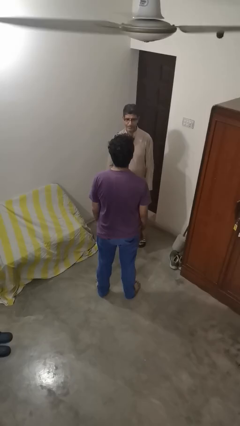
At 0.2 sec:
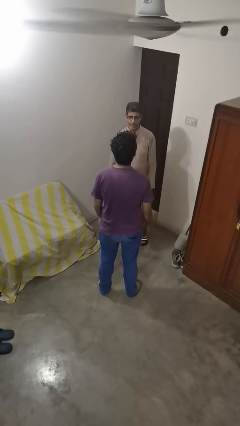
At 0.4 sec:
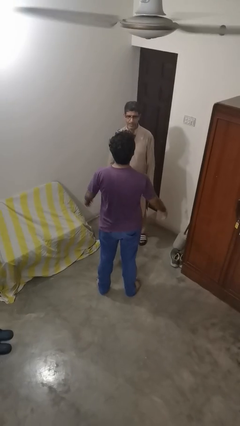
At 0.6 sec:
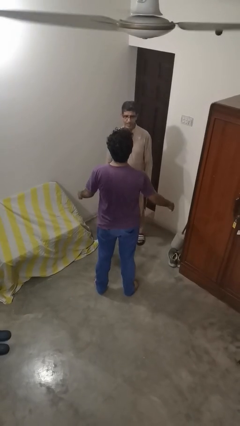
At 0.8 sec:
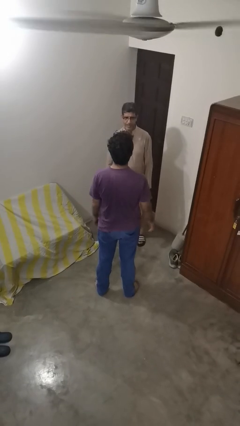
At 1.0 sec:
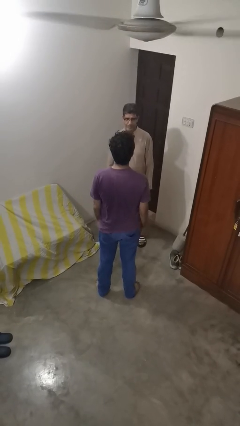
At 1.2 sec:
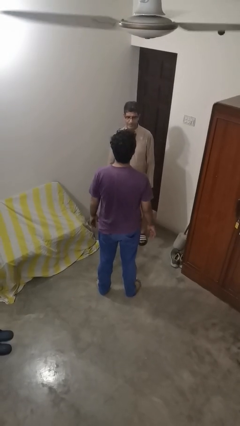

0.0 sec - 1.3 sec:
person laughs with person

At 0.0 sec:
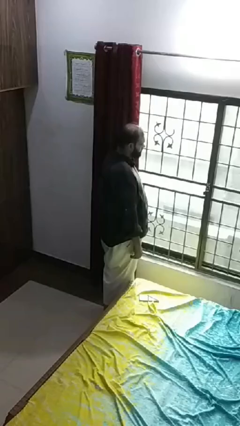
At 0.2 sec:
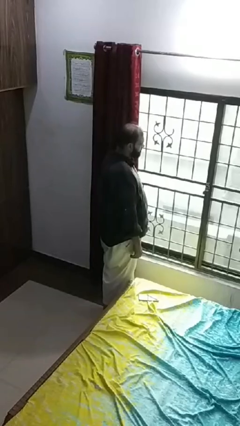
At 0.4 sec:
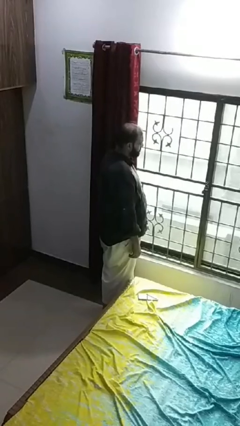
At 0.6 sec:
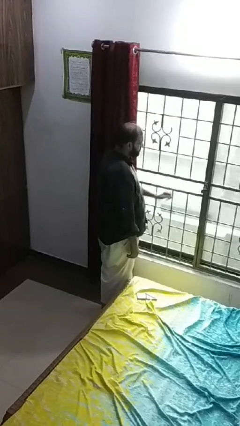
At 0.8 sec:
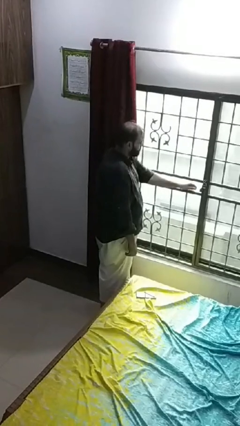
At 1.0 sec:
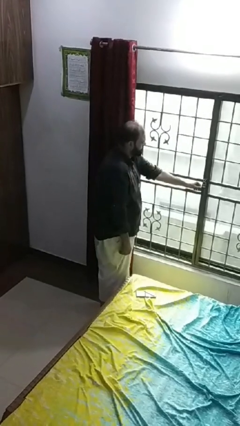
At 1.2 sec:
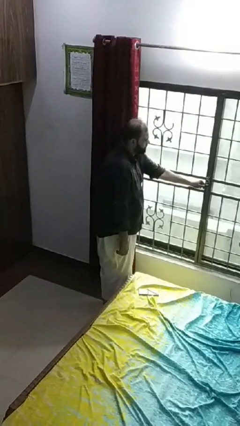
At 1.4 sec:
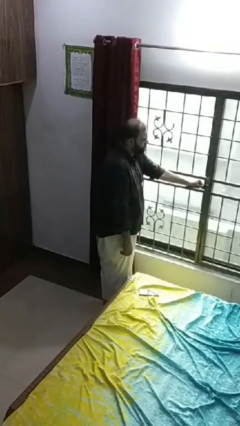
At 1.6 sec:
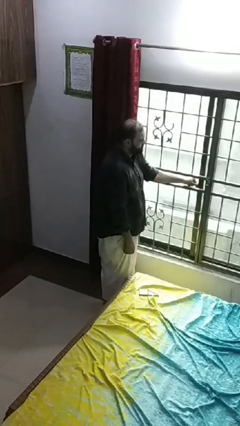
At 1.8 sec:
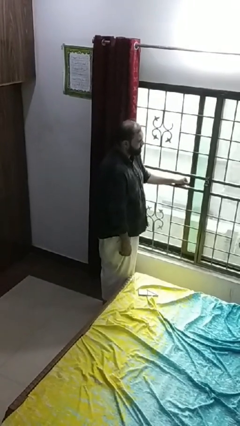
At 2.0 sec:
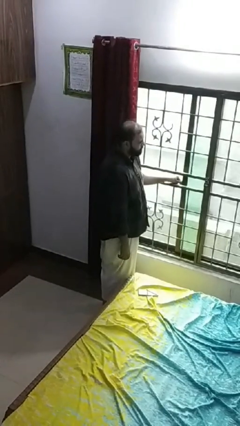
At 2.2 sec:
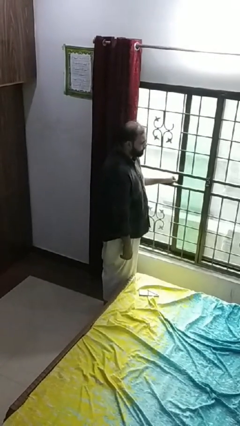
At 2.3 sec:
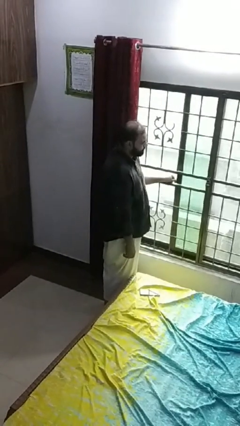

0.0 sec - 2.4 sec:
person opens home window

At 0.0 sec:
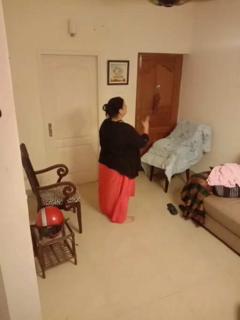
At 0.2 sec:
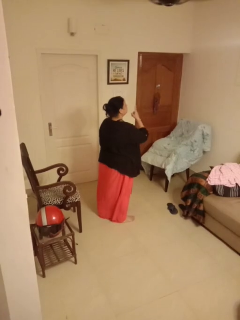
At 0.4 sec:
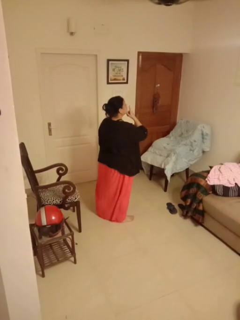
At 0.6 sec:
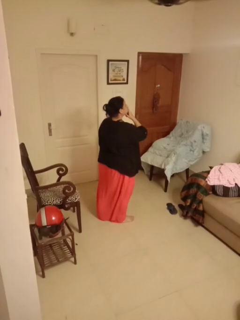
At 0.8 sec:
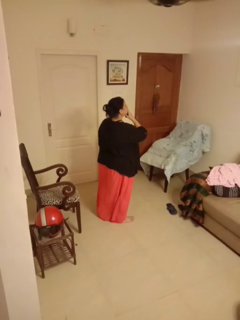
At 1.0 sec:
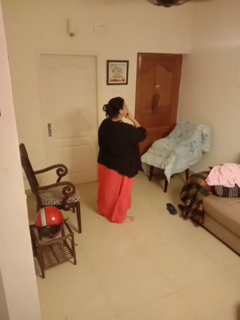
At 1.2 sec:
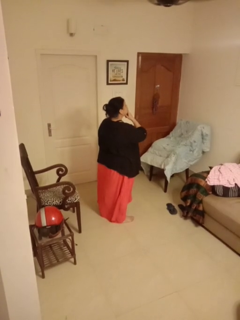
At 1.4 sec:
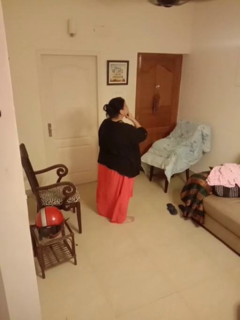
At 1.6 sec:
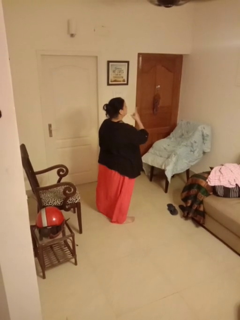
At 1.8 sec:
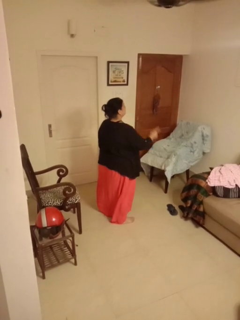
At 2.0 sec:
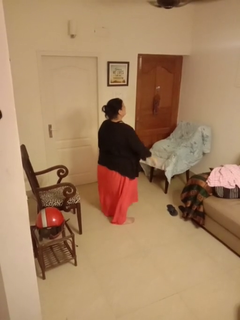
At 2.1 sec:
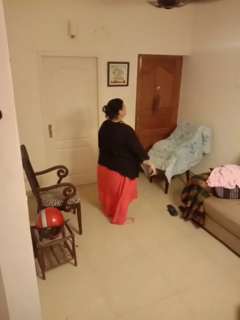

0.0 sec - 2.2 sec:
person gestures be quiet

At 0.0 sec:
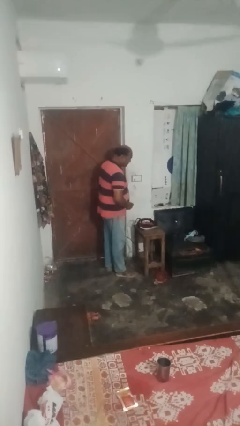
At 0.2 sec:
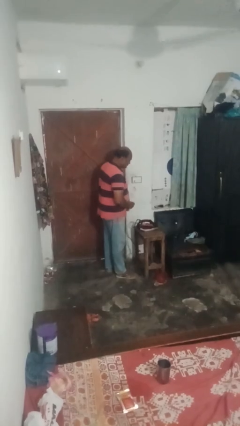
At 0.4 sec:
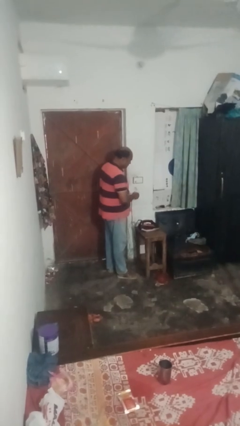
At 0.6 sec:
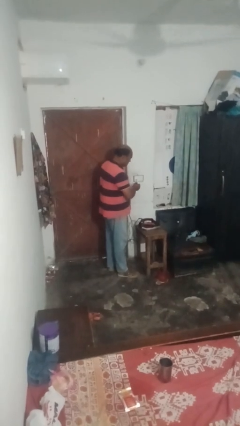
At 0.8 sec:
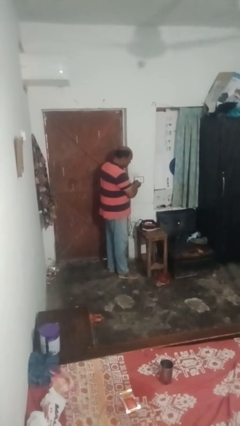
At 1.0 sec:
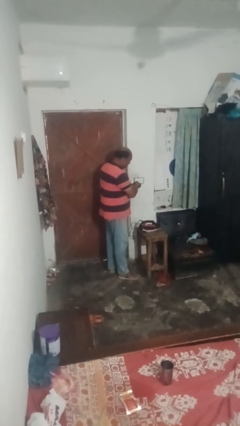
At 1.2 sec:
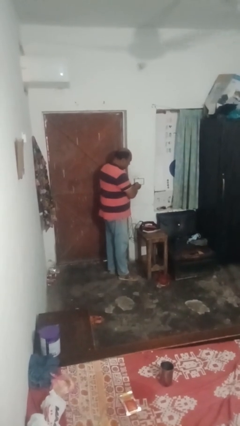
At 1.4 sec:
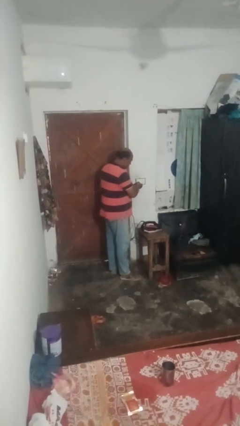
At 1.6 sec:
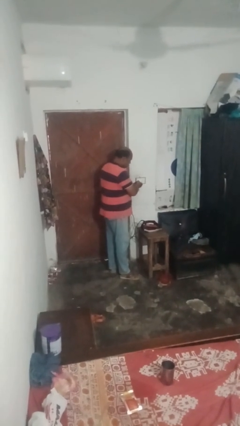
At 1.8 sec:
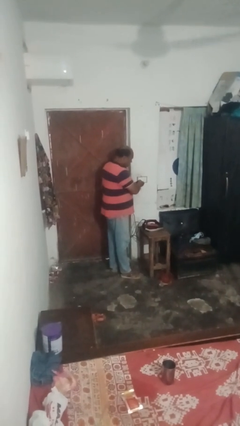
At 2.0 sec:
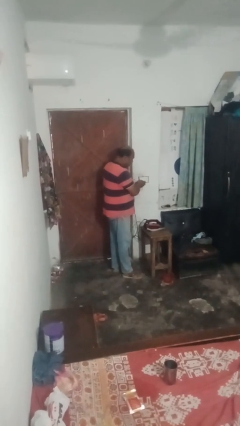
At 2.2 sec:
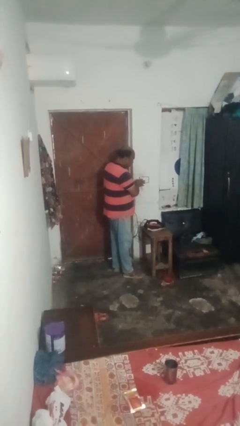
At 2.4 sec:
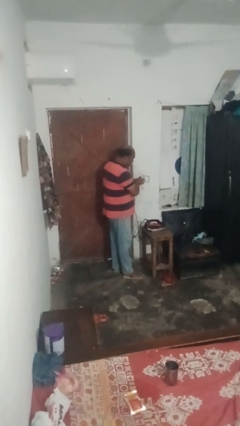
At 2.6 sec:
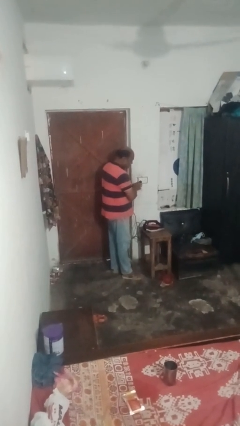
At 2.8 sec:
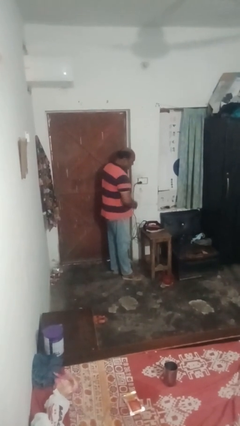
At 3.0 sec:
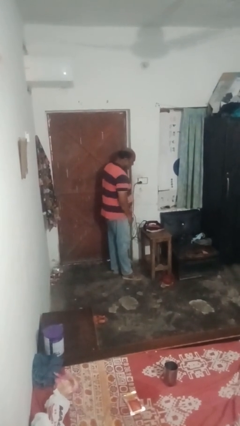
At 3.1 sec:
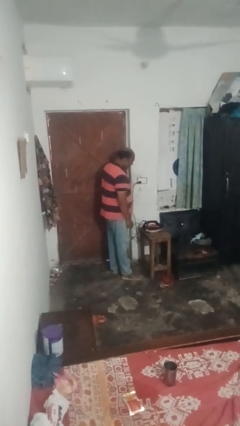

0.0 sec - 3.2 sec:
person plugs into electrical socket

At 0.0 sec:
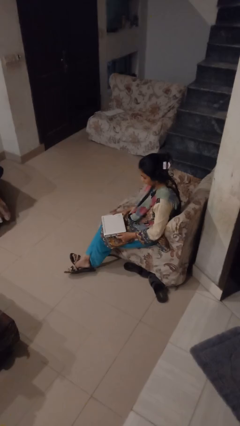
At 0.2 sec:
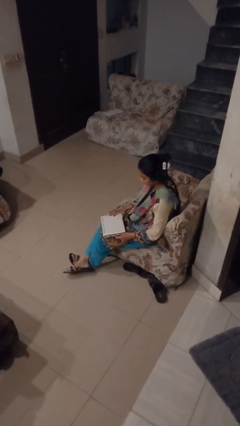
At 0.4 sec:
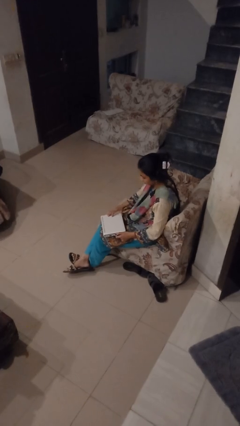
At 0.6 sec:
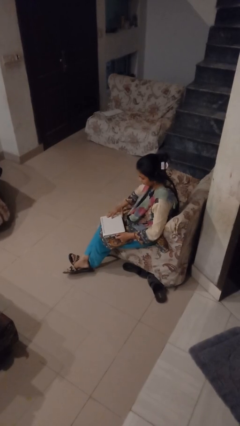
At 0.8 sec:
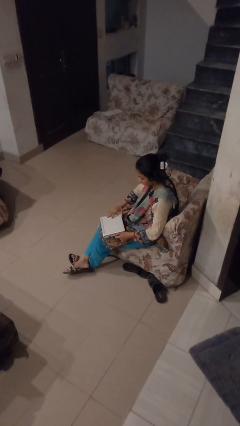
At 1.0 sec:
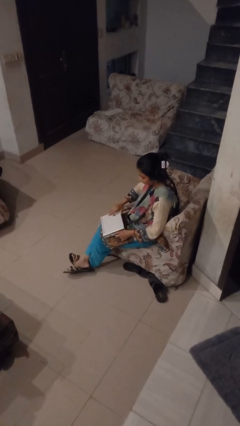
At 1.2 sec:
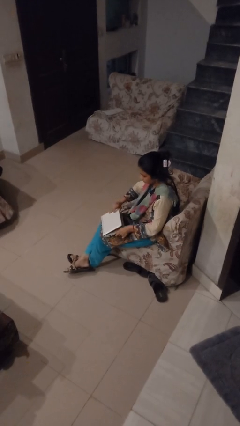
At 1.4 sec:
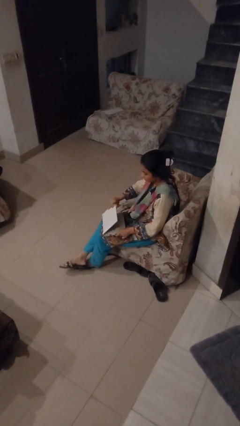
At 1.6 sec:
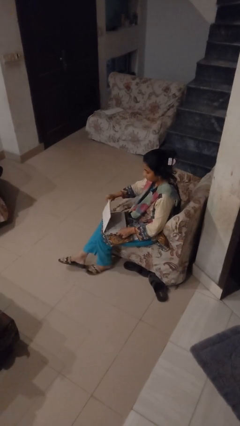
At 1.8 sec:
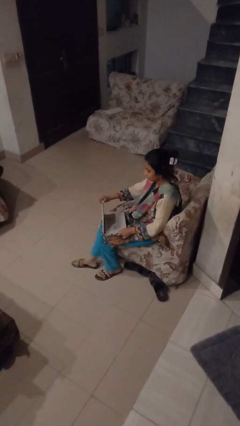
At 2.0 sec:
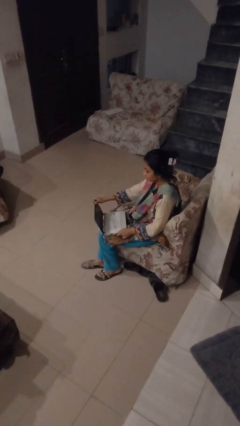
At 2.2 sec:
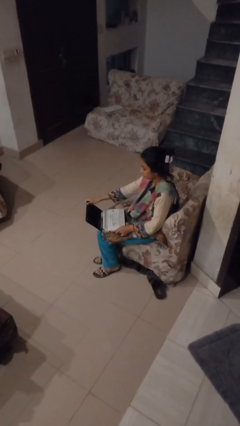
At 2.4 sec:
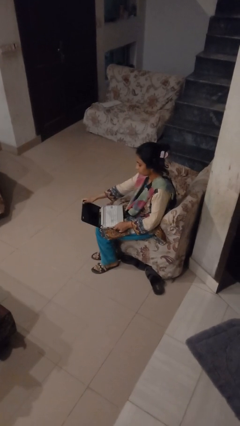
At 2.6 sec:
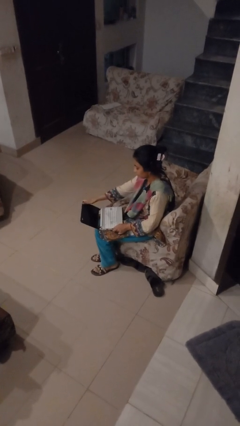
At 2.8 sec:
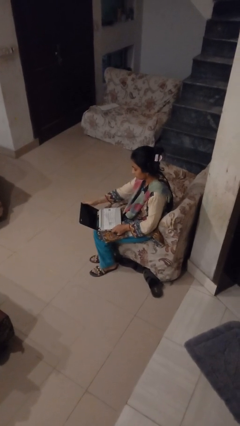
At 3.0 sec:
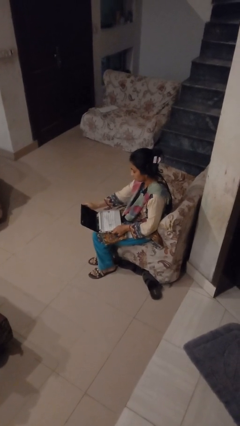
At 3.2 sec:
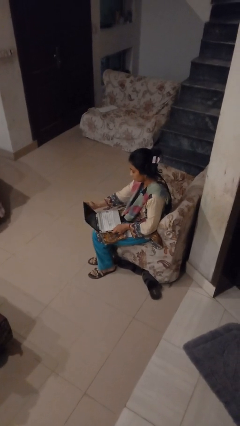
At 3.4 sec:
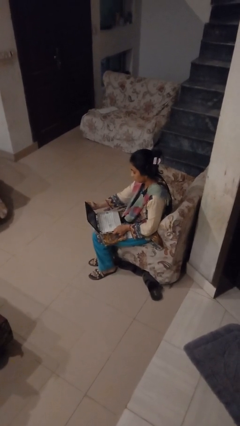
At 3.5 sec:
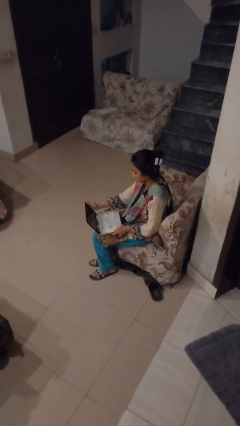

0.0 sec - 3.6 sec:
person opens laptop

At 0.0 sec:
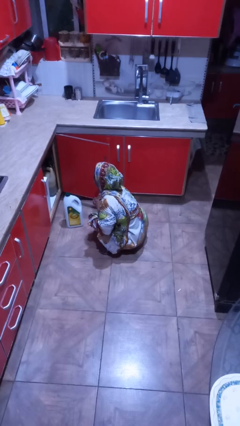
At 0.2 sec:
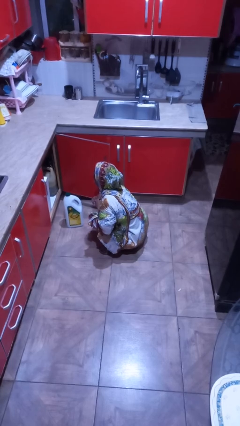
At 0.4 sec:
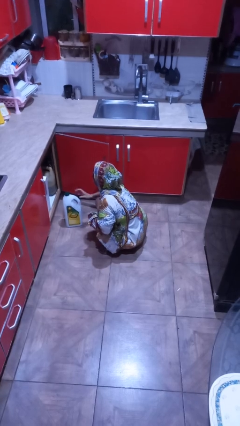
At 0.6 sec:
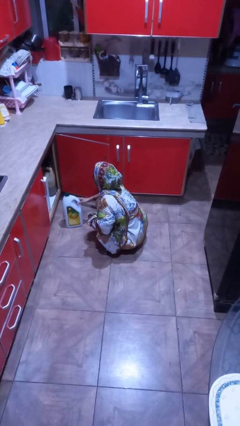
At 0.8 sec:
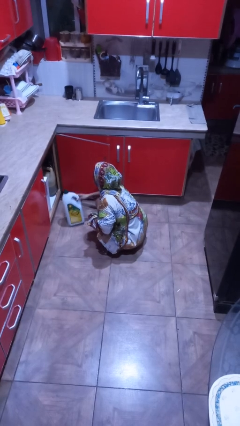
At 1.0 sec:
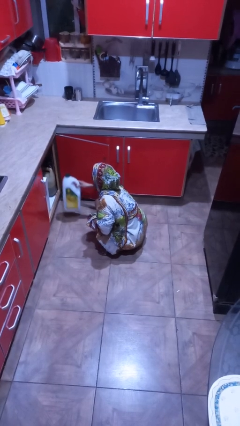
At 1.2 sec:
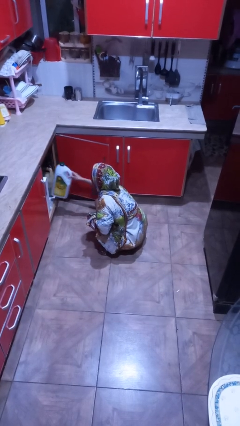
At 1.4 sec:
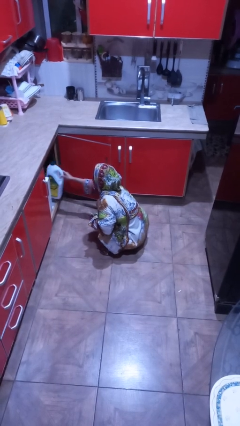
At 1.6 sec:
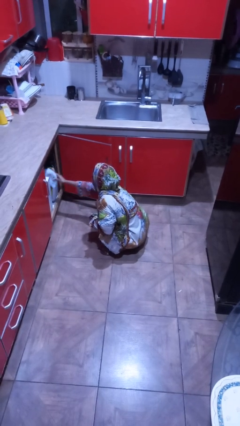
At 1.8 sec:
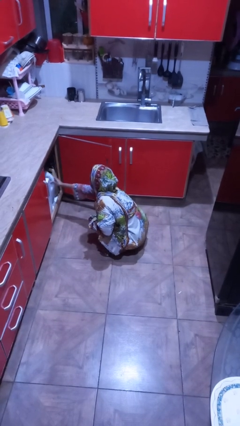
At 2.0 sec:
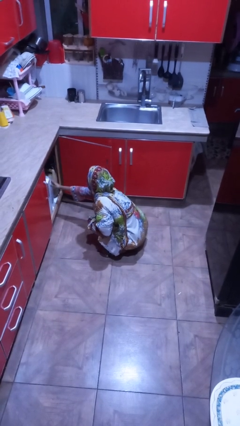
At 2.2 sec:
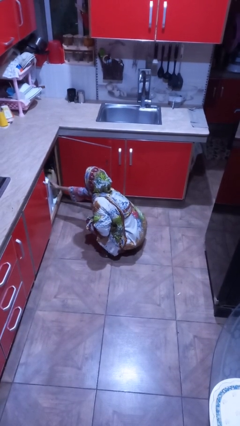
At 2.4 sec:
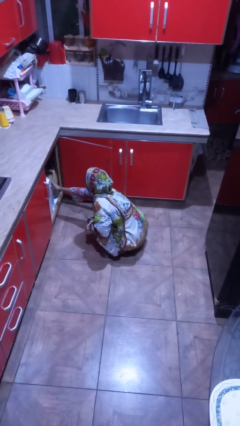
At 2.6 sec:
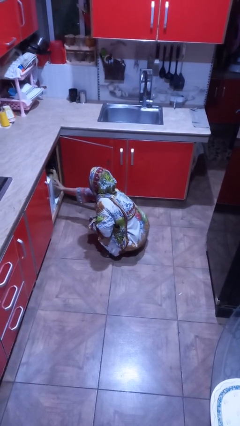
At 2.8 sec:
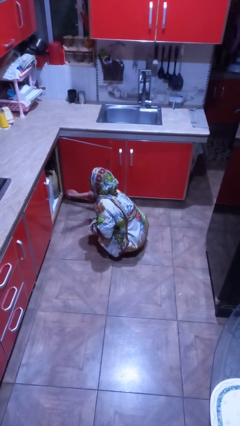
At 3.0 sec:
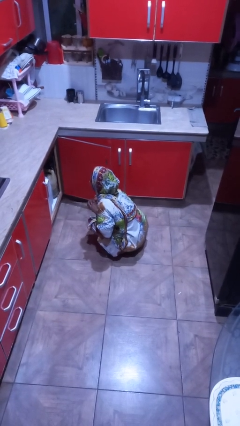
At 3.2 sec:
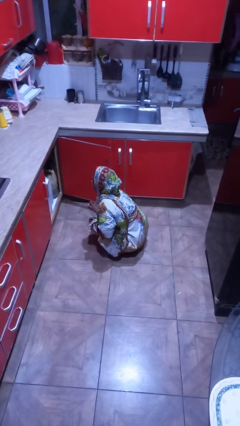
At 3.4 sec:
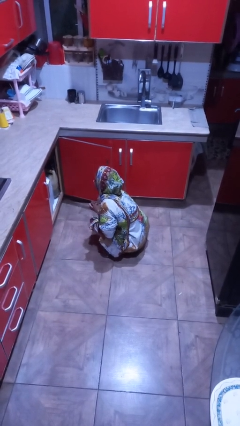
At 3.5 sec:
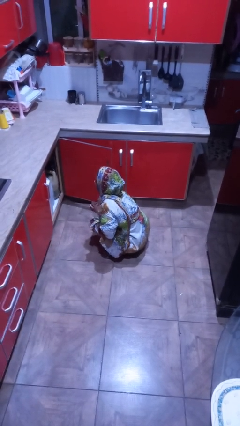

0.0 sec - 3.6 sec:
person puts object in cabinet

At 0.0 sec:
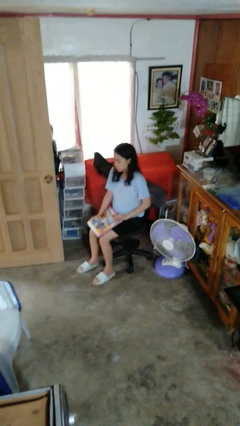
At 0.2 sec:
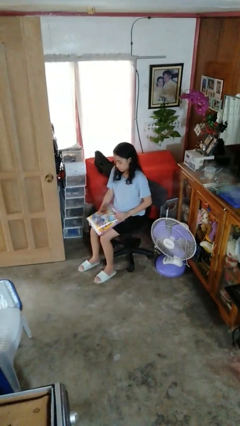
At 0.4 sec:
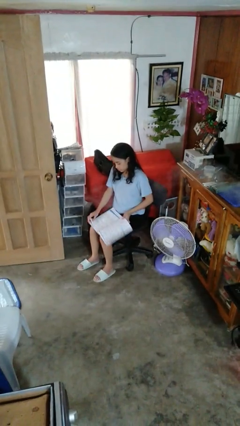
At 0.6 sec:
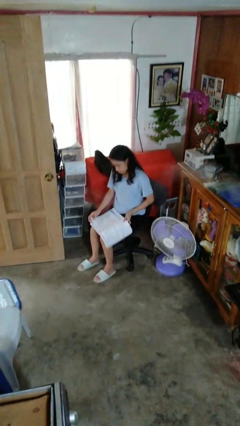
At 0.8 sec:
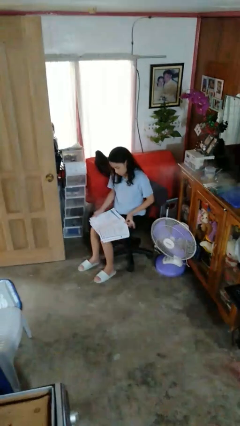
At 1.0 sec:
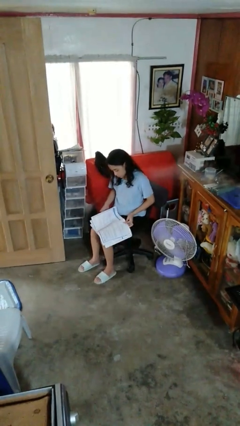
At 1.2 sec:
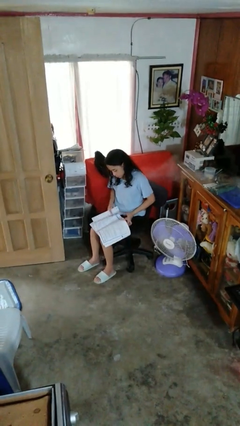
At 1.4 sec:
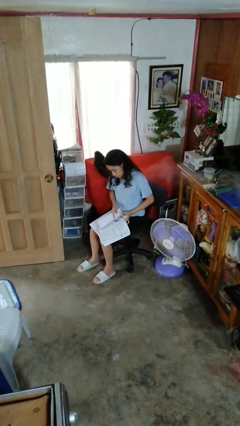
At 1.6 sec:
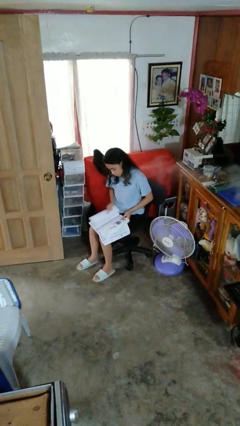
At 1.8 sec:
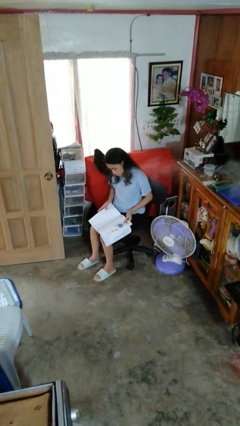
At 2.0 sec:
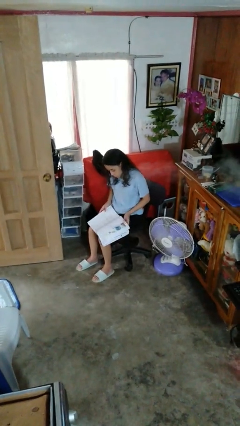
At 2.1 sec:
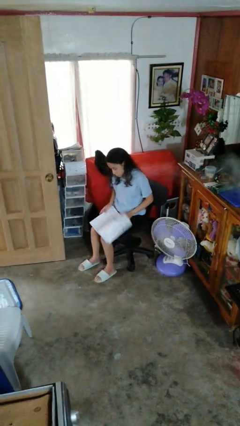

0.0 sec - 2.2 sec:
person reads book
